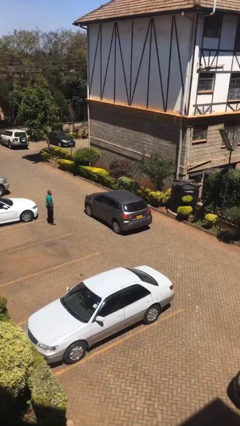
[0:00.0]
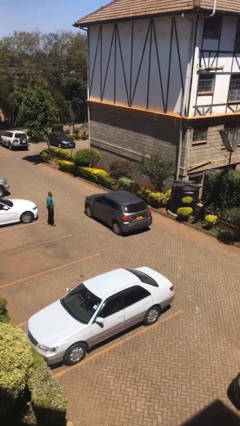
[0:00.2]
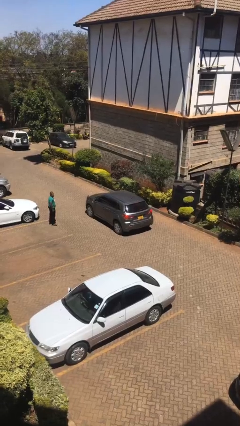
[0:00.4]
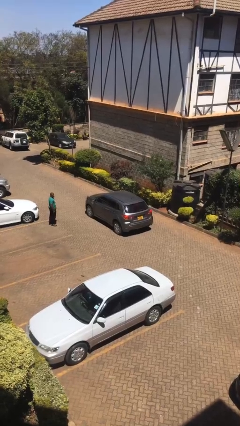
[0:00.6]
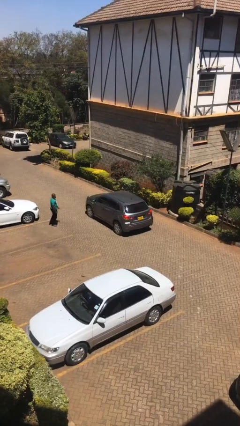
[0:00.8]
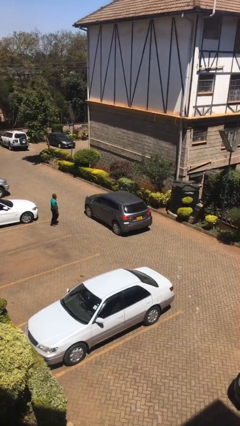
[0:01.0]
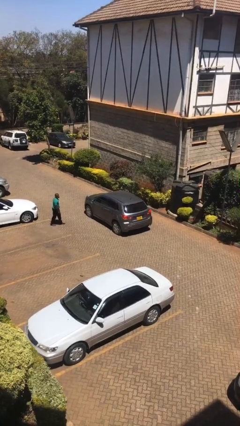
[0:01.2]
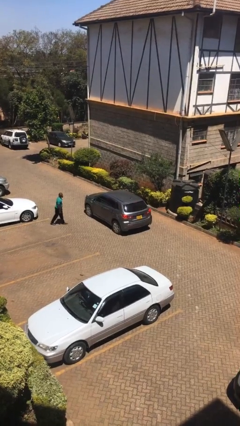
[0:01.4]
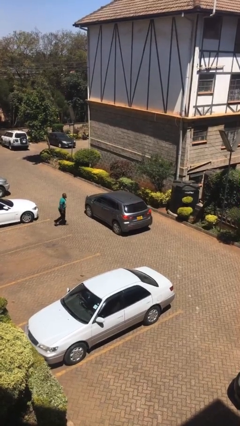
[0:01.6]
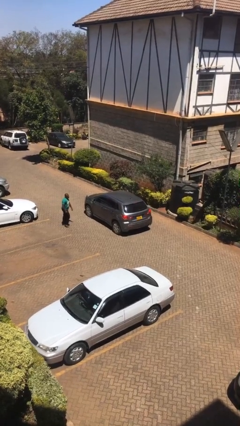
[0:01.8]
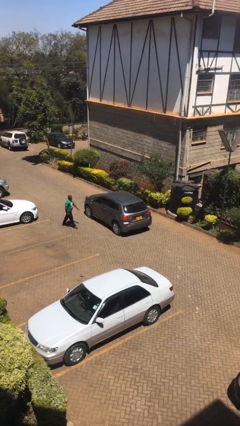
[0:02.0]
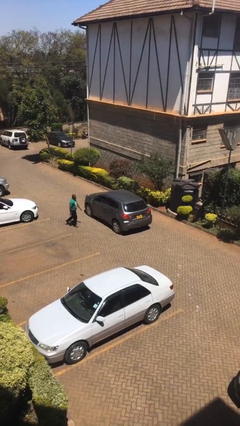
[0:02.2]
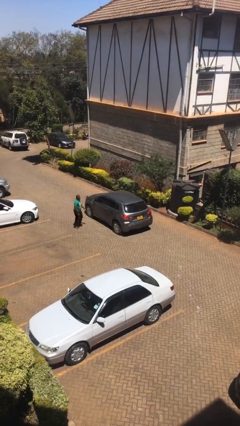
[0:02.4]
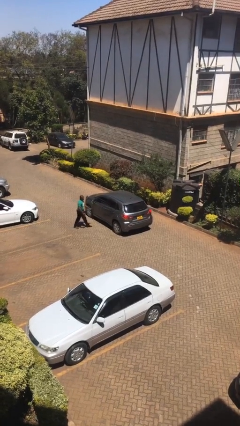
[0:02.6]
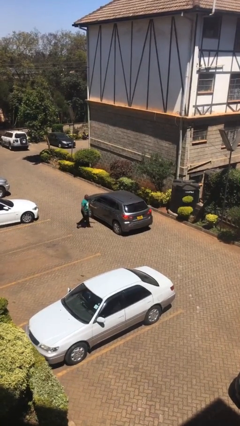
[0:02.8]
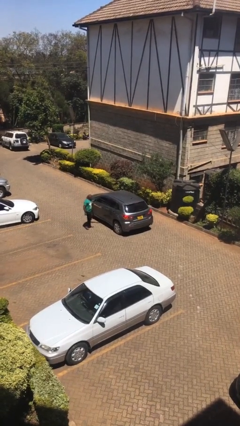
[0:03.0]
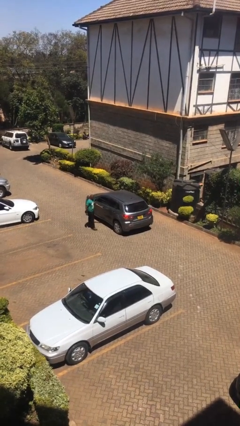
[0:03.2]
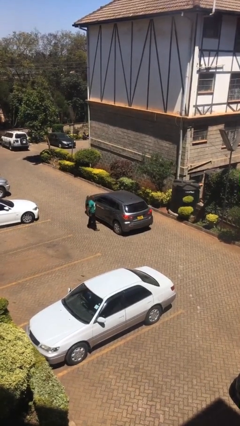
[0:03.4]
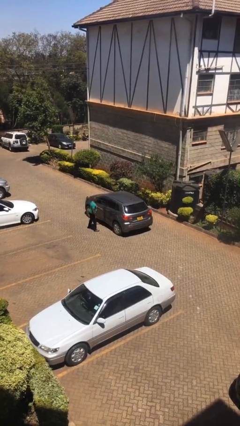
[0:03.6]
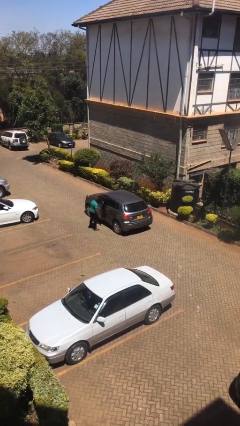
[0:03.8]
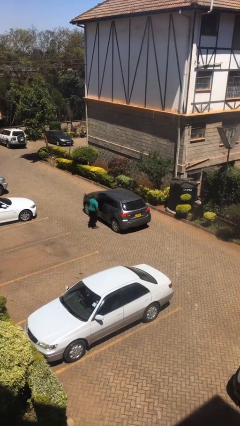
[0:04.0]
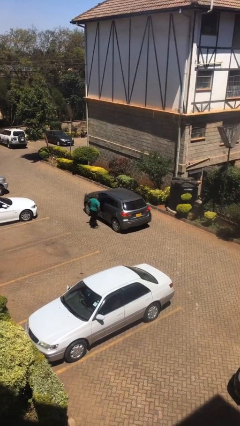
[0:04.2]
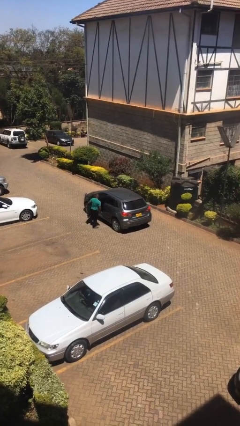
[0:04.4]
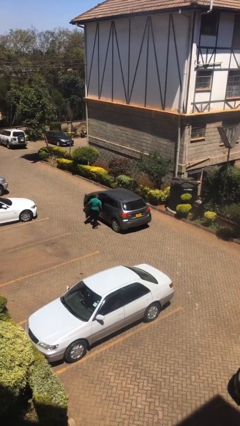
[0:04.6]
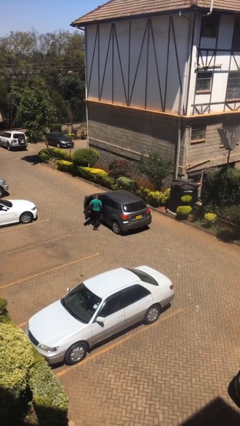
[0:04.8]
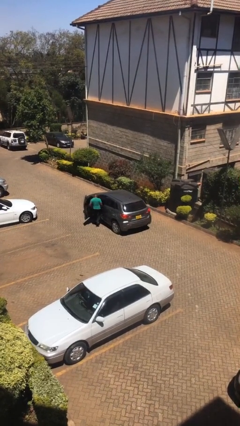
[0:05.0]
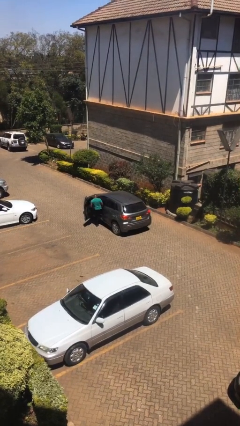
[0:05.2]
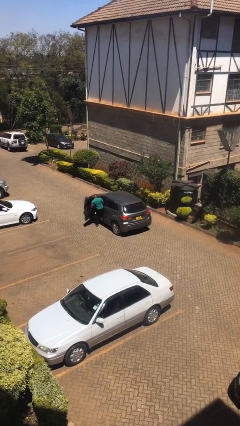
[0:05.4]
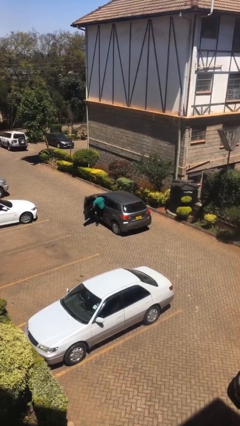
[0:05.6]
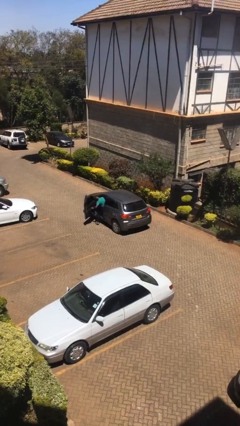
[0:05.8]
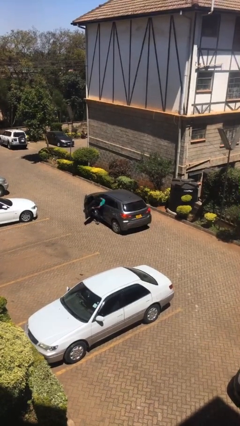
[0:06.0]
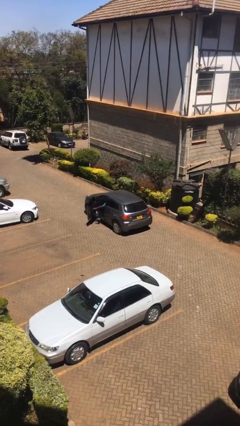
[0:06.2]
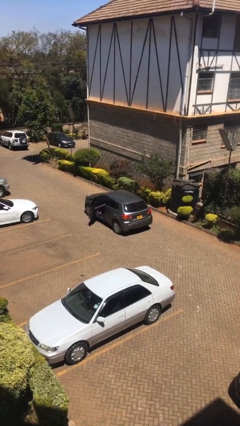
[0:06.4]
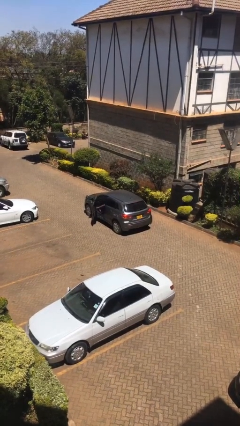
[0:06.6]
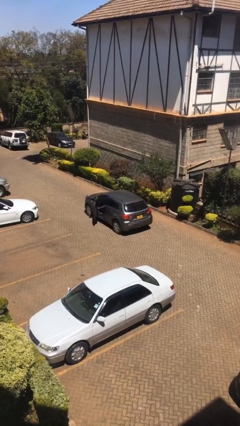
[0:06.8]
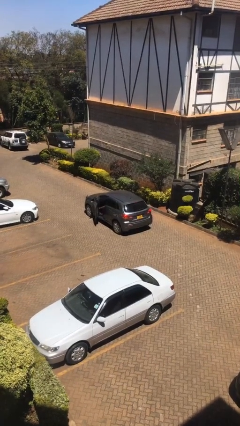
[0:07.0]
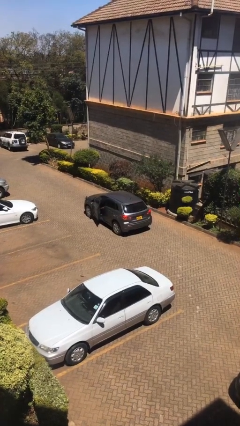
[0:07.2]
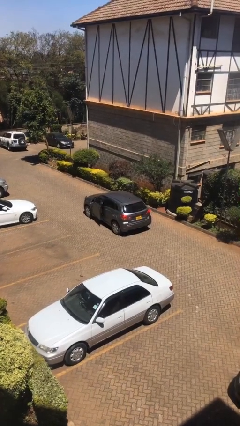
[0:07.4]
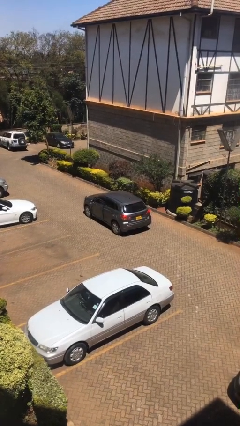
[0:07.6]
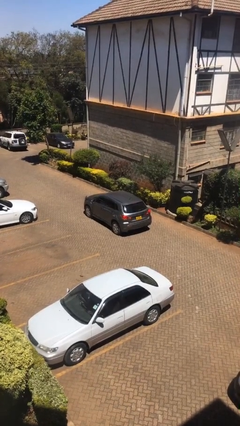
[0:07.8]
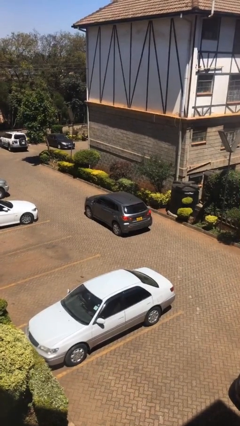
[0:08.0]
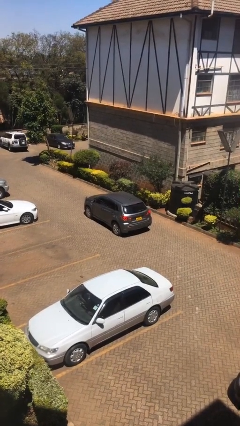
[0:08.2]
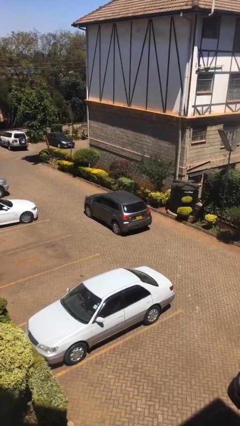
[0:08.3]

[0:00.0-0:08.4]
car picks up person

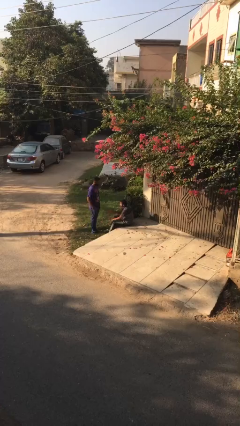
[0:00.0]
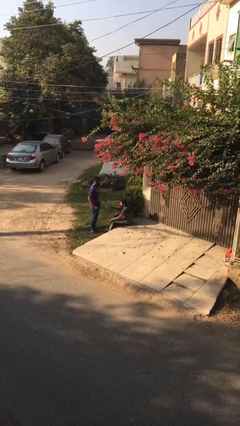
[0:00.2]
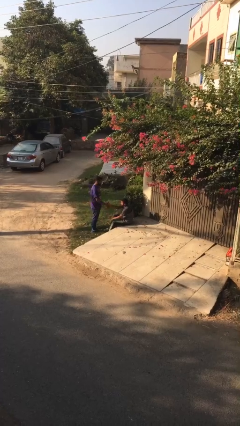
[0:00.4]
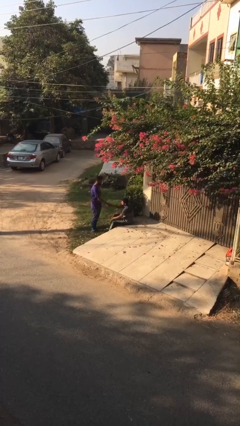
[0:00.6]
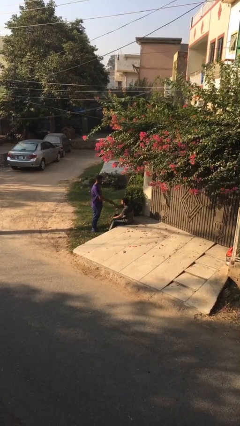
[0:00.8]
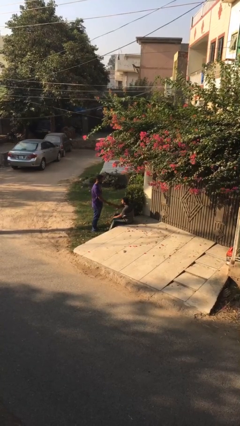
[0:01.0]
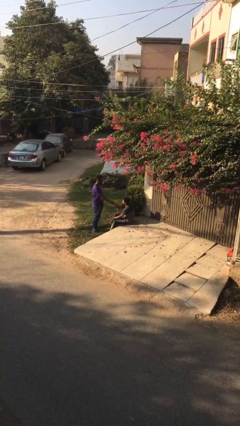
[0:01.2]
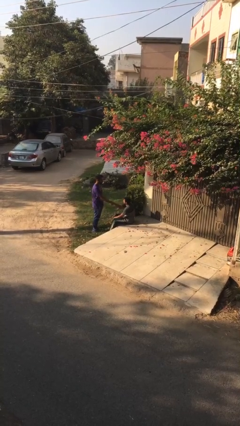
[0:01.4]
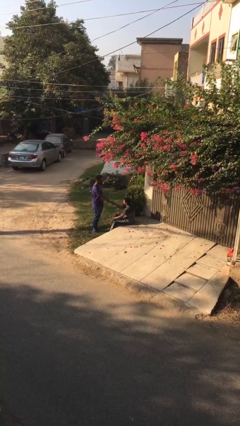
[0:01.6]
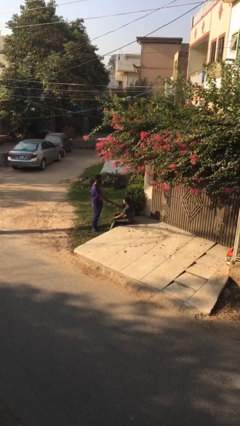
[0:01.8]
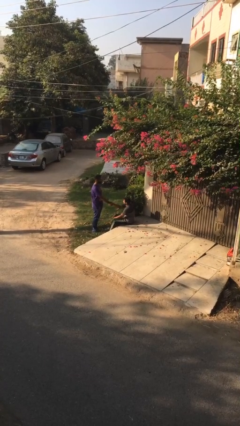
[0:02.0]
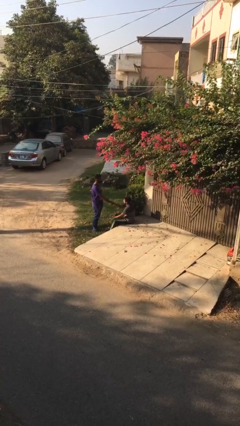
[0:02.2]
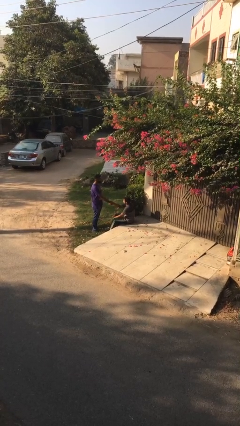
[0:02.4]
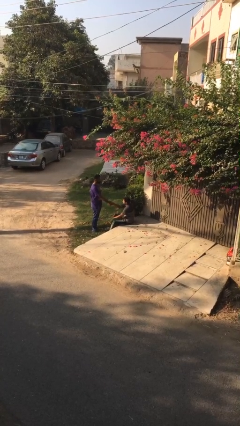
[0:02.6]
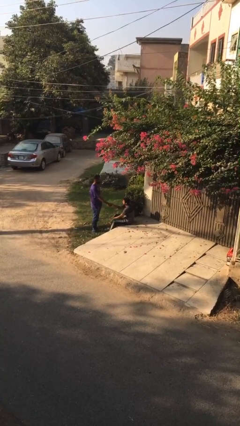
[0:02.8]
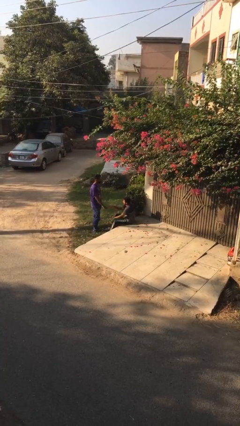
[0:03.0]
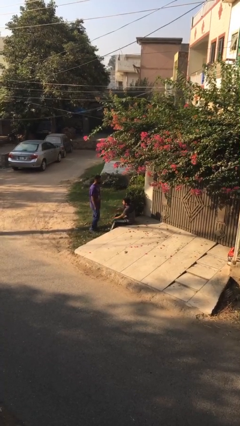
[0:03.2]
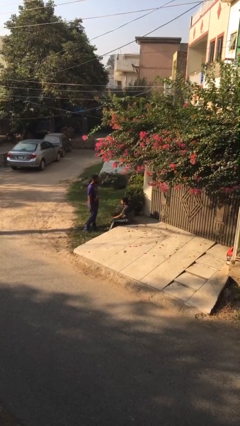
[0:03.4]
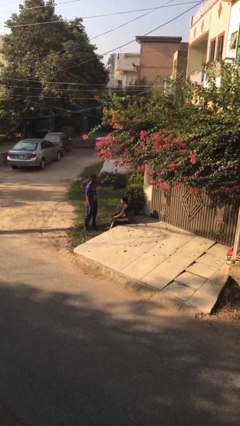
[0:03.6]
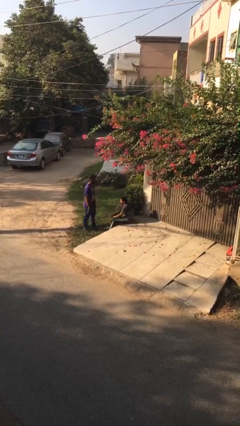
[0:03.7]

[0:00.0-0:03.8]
person shakes hand

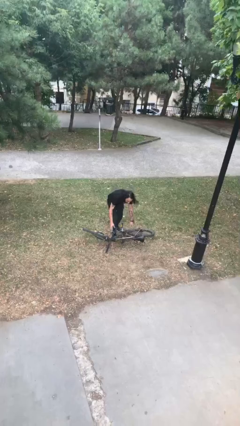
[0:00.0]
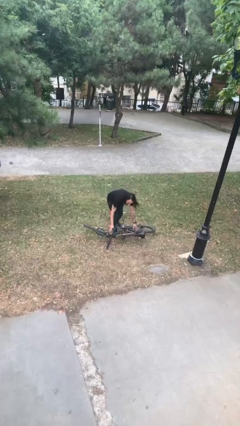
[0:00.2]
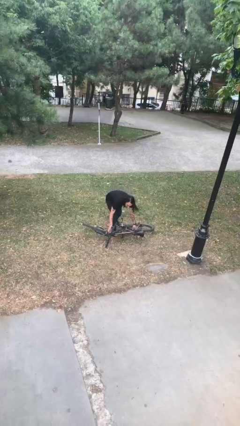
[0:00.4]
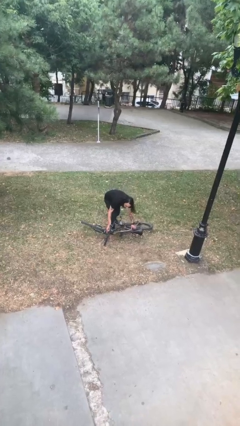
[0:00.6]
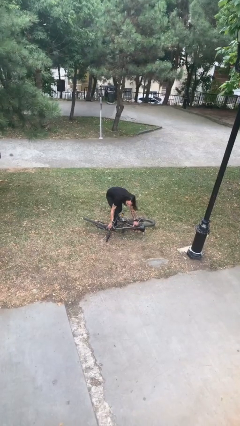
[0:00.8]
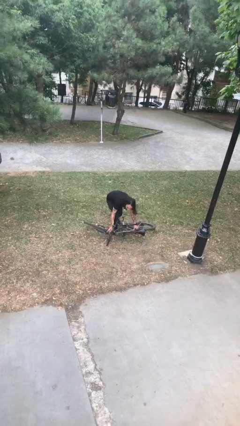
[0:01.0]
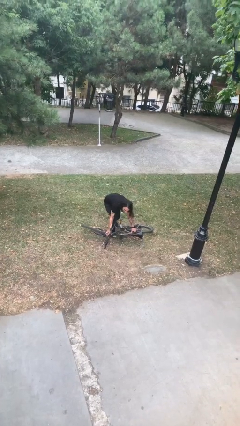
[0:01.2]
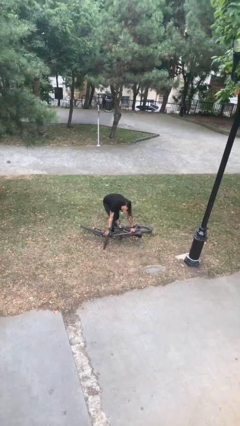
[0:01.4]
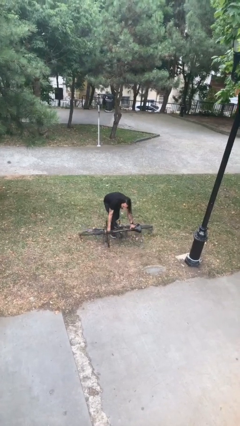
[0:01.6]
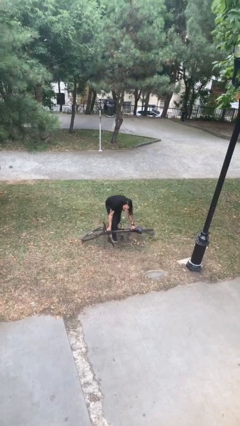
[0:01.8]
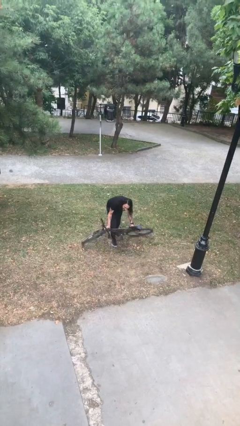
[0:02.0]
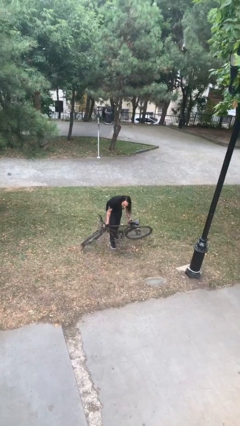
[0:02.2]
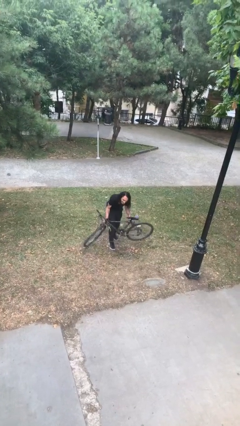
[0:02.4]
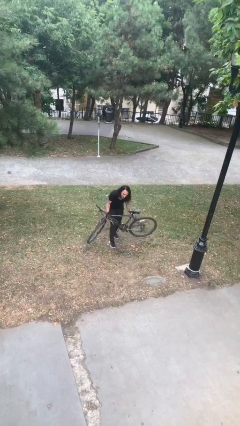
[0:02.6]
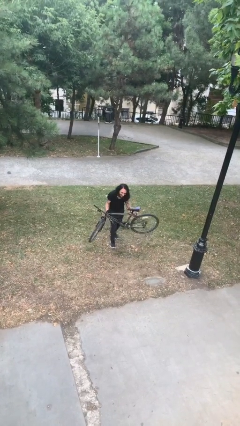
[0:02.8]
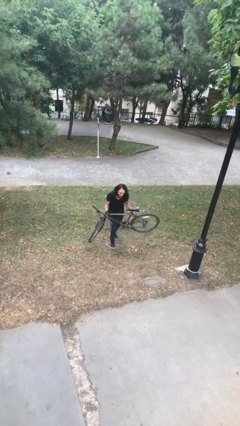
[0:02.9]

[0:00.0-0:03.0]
person picks up object from floor

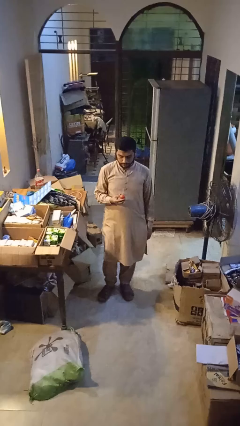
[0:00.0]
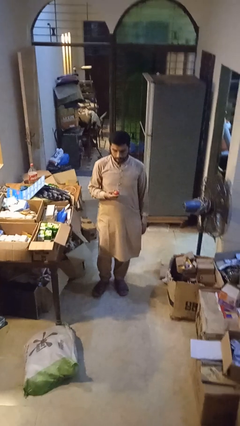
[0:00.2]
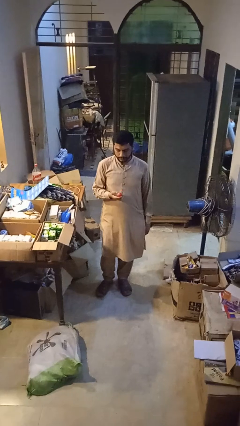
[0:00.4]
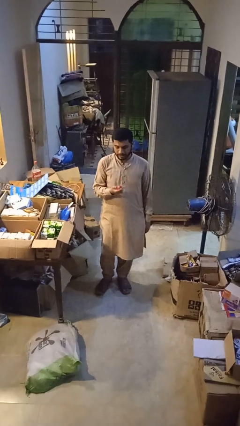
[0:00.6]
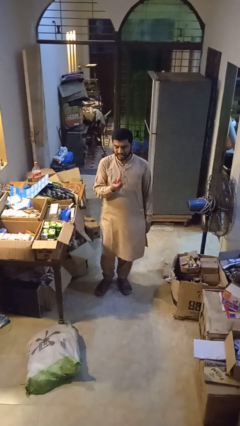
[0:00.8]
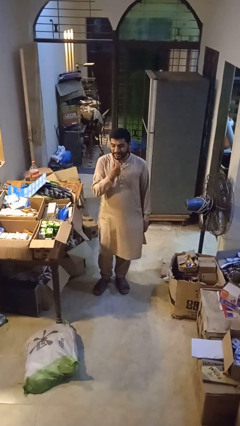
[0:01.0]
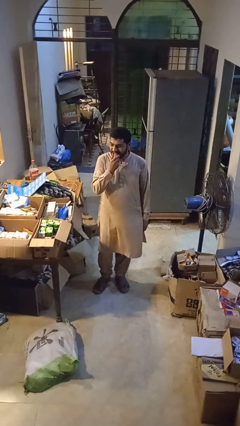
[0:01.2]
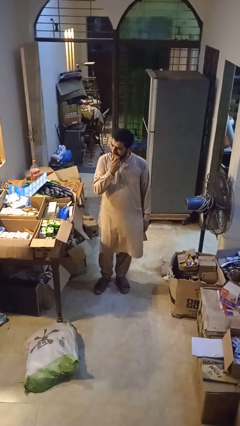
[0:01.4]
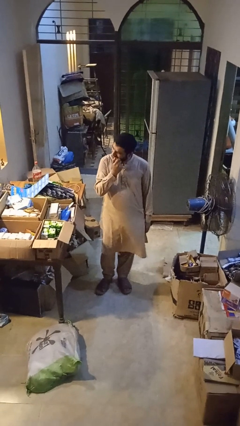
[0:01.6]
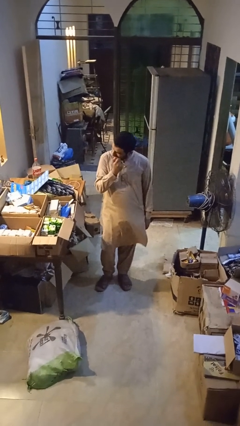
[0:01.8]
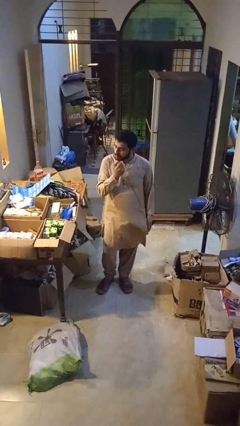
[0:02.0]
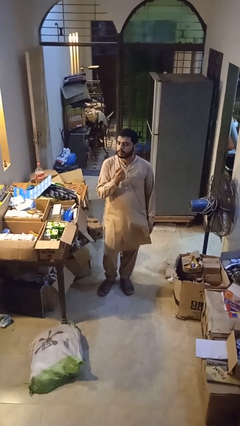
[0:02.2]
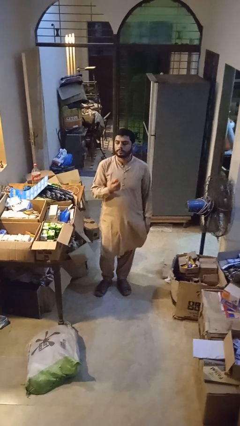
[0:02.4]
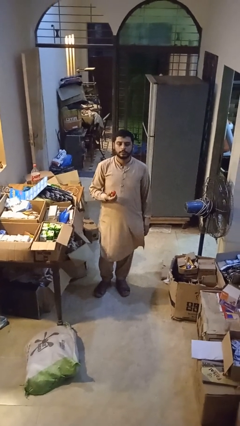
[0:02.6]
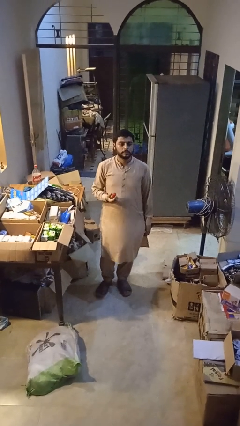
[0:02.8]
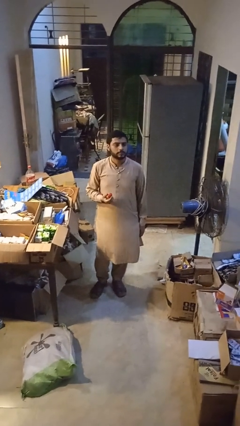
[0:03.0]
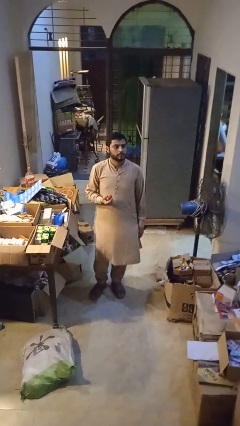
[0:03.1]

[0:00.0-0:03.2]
person eats apple
